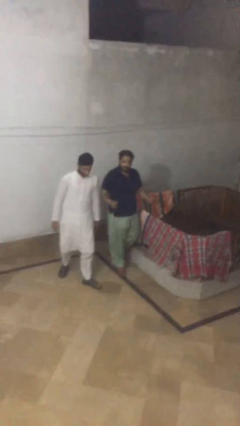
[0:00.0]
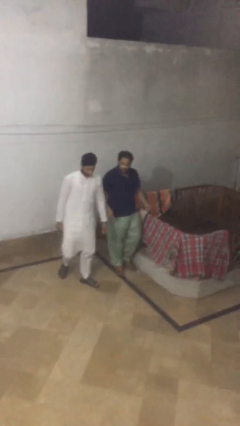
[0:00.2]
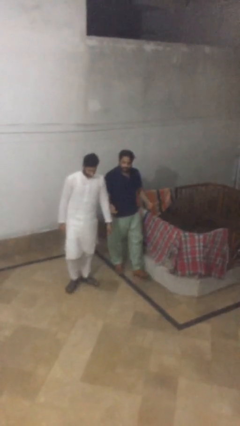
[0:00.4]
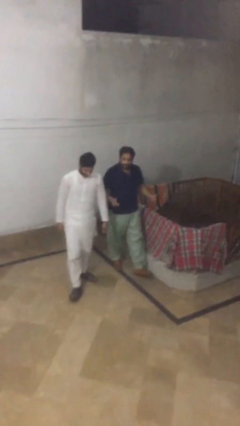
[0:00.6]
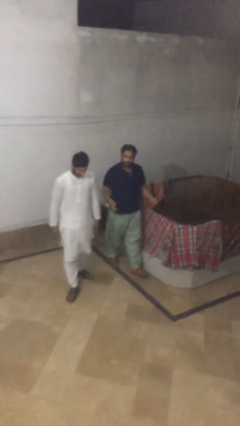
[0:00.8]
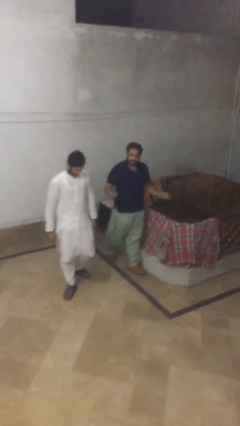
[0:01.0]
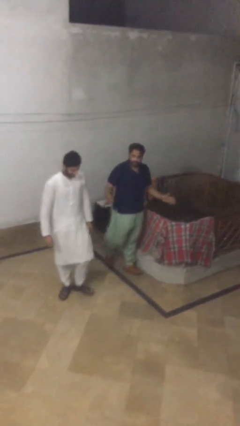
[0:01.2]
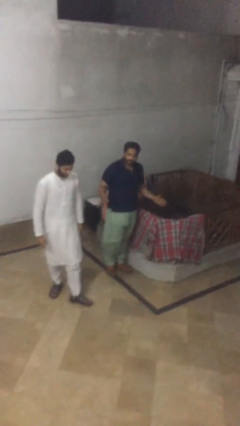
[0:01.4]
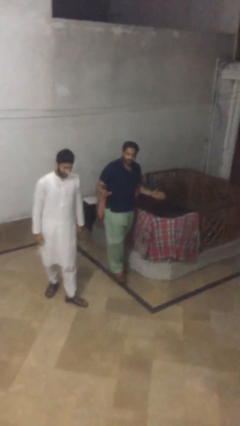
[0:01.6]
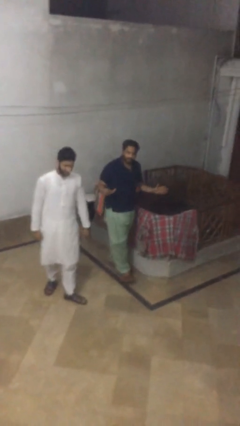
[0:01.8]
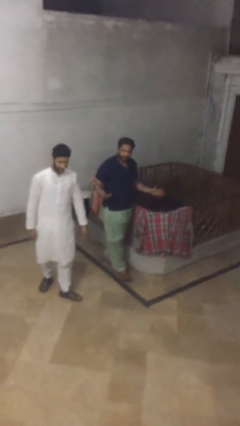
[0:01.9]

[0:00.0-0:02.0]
person talks to person

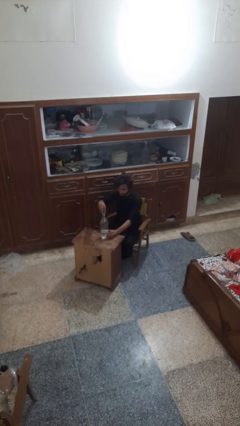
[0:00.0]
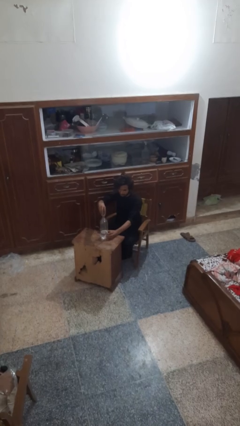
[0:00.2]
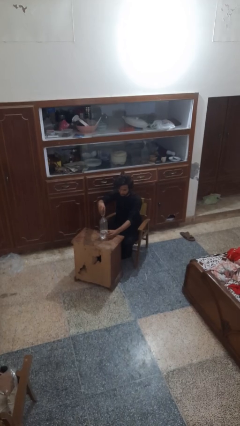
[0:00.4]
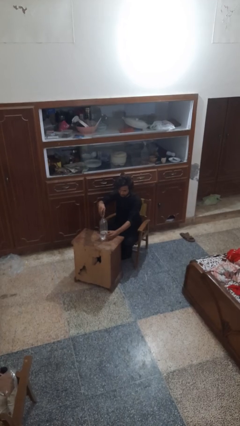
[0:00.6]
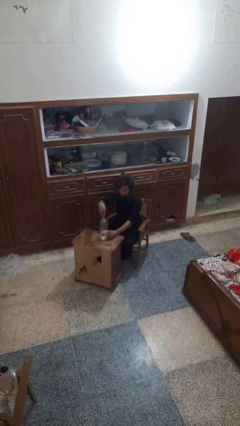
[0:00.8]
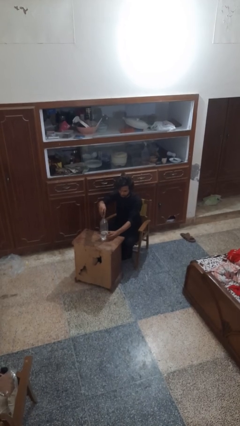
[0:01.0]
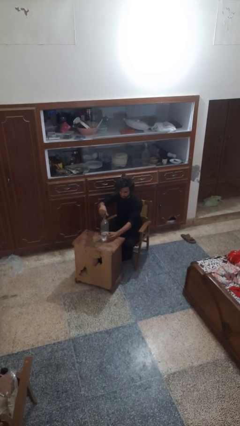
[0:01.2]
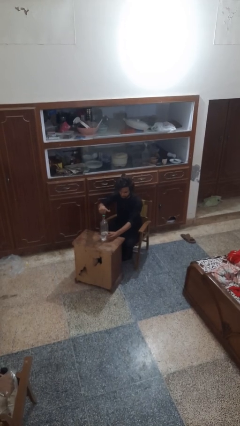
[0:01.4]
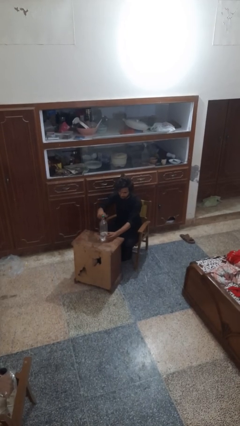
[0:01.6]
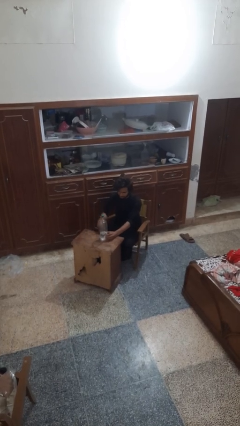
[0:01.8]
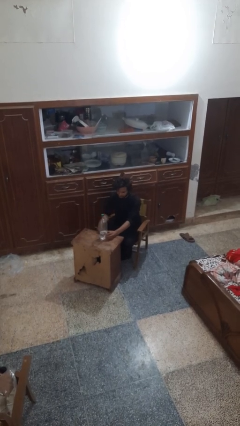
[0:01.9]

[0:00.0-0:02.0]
person screws lid to bottle

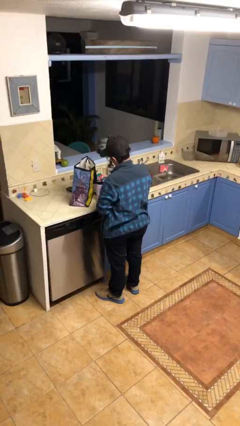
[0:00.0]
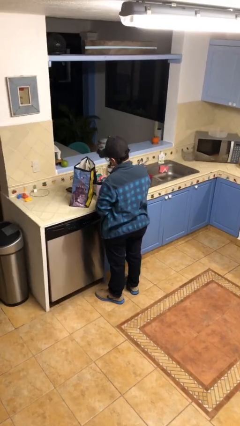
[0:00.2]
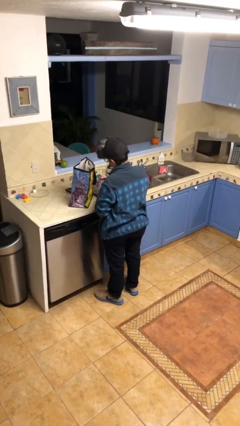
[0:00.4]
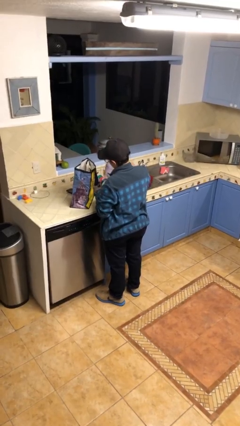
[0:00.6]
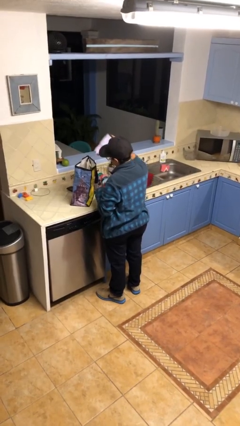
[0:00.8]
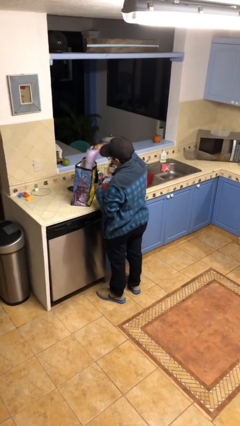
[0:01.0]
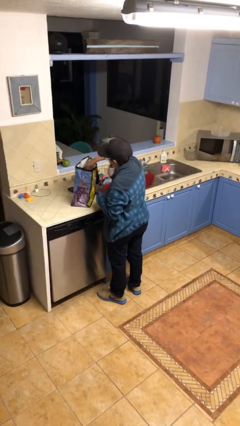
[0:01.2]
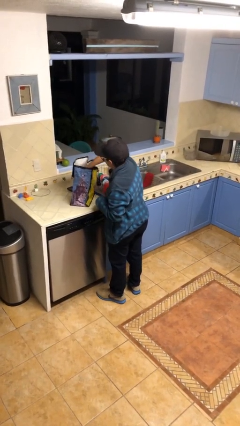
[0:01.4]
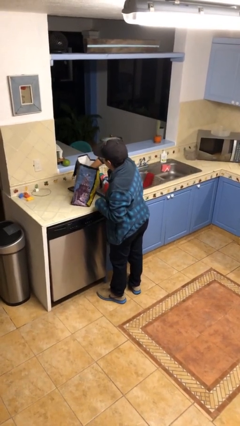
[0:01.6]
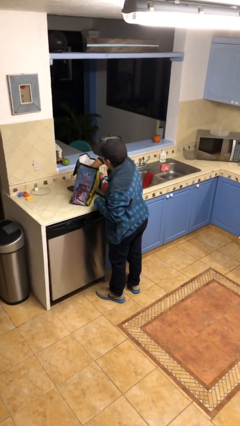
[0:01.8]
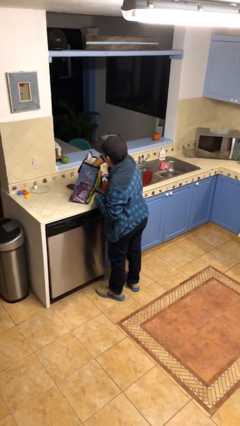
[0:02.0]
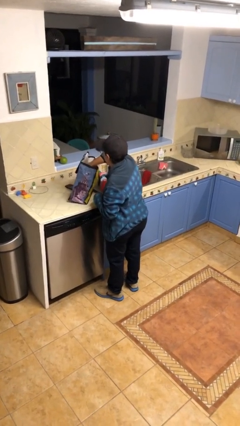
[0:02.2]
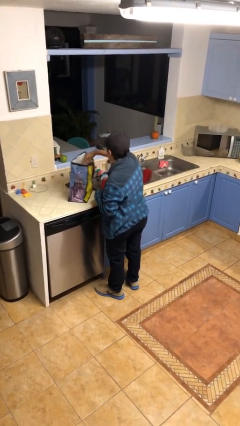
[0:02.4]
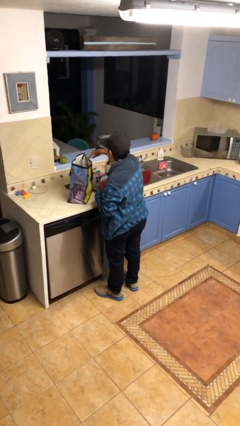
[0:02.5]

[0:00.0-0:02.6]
person puts object into bag

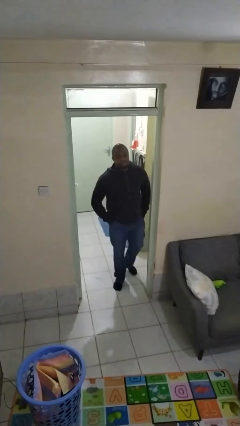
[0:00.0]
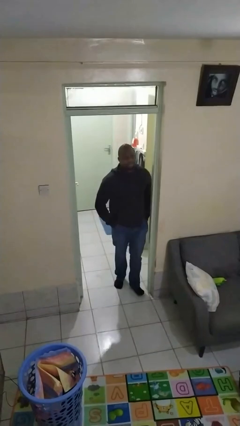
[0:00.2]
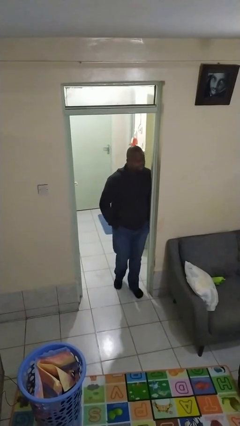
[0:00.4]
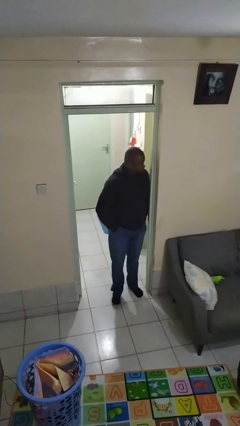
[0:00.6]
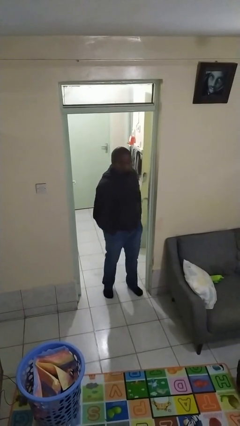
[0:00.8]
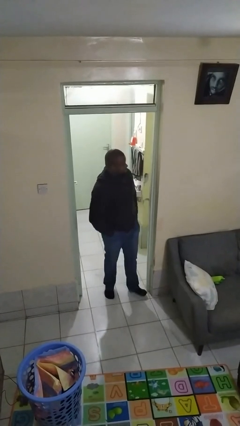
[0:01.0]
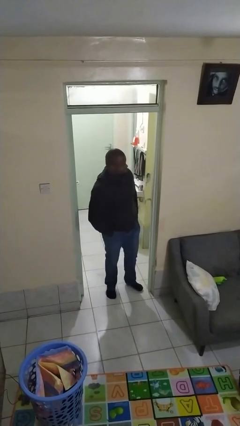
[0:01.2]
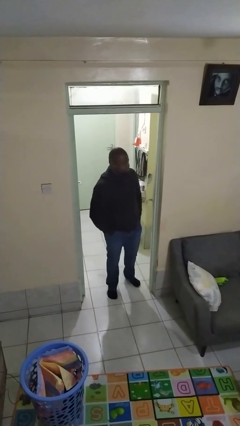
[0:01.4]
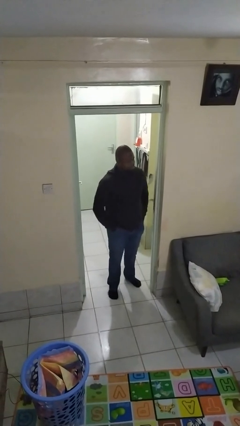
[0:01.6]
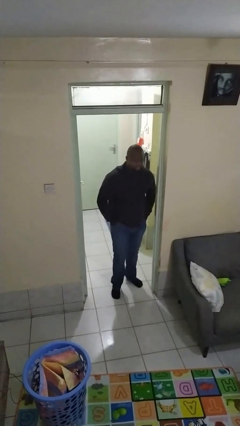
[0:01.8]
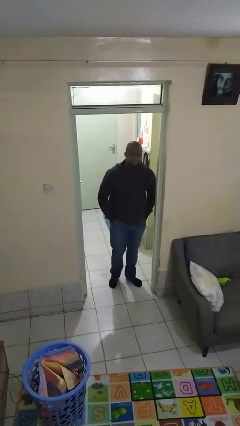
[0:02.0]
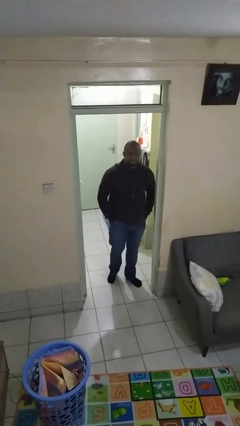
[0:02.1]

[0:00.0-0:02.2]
person bumps into wall

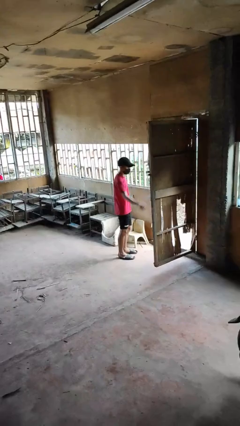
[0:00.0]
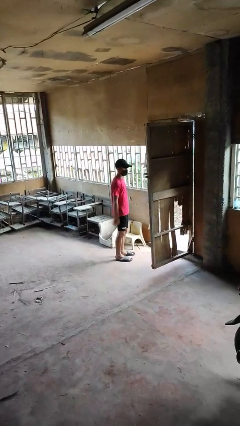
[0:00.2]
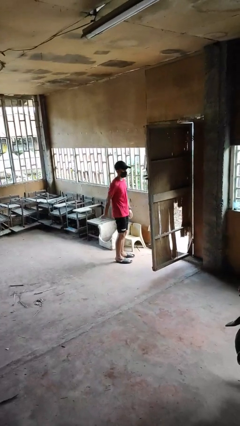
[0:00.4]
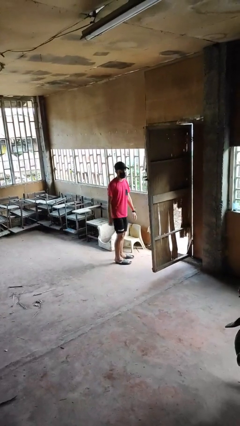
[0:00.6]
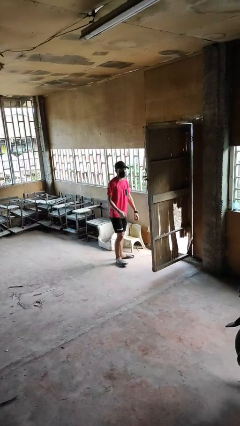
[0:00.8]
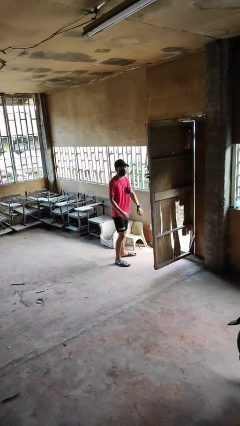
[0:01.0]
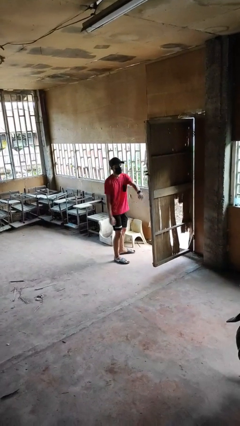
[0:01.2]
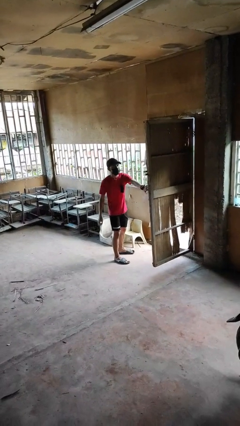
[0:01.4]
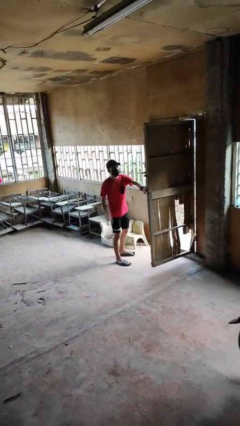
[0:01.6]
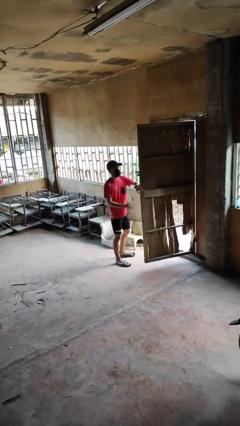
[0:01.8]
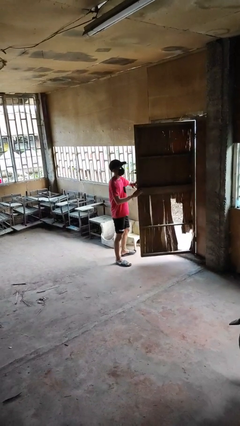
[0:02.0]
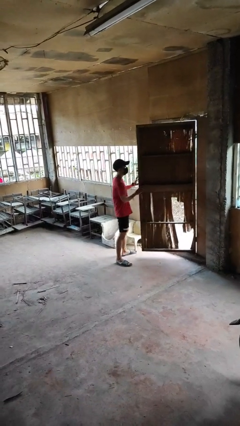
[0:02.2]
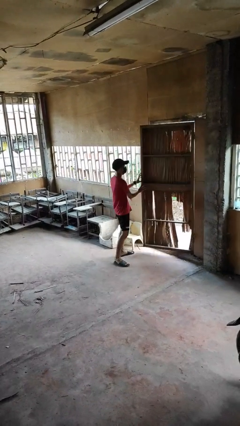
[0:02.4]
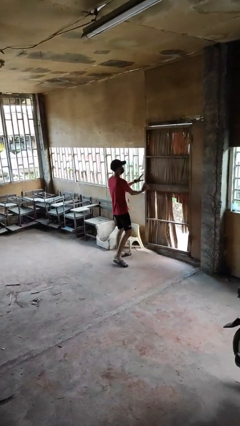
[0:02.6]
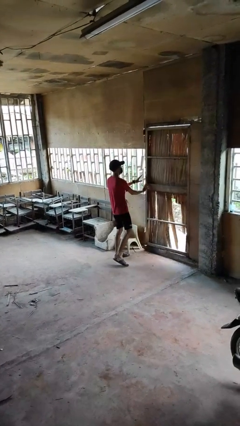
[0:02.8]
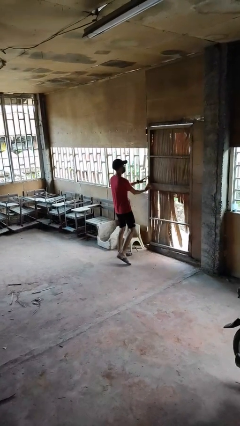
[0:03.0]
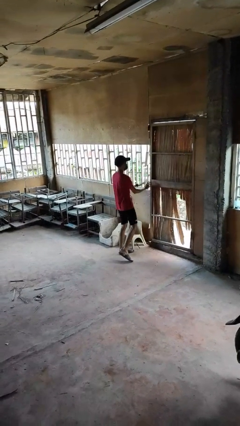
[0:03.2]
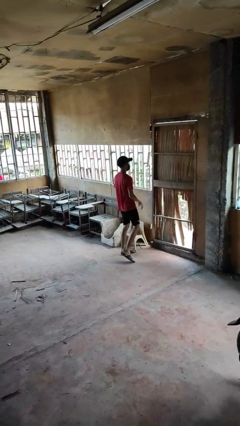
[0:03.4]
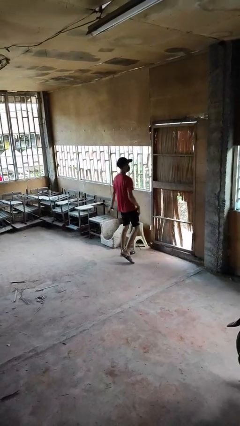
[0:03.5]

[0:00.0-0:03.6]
person closes facility door

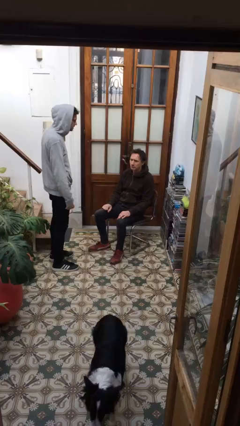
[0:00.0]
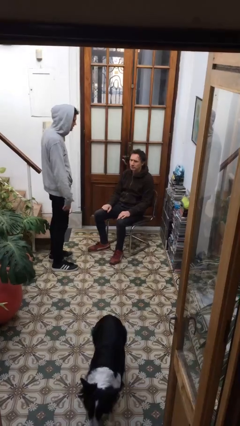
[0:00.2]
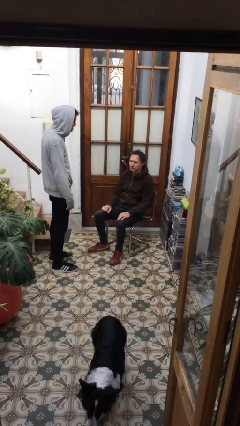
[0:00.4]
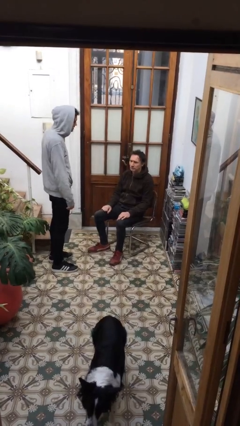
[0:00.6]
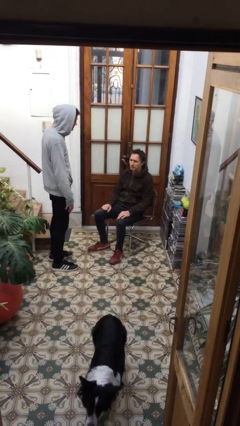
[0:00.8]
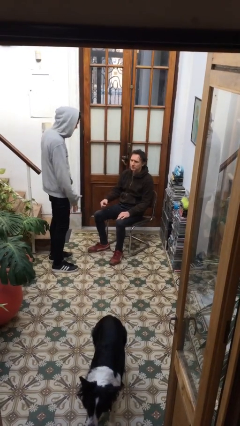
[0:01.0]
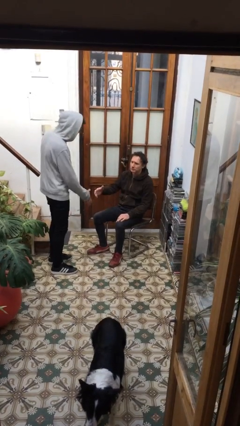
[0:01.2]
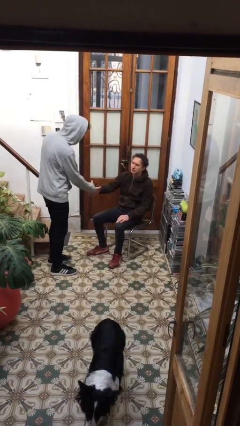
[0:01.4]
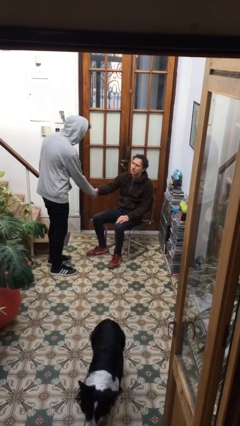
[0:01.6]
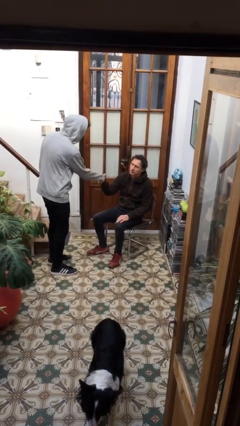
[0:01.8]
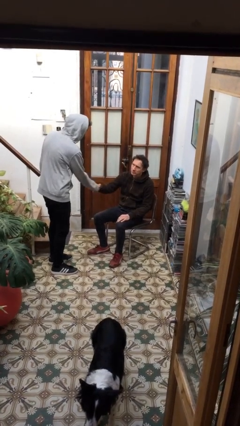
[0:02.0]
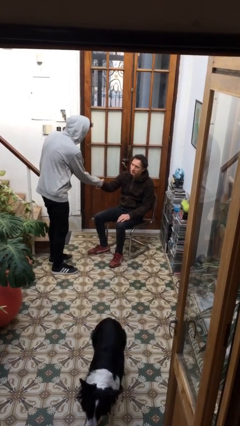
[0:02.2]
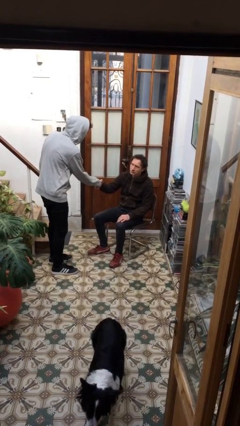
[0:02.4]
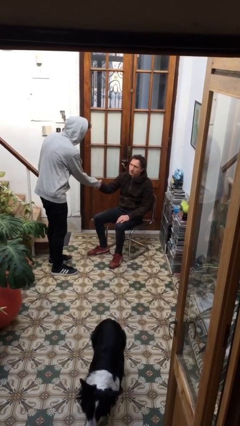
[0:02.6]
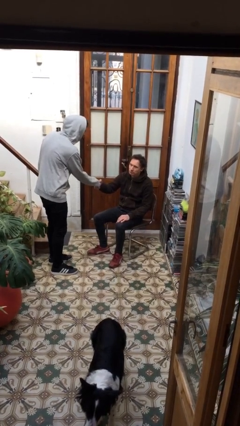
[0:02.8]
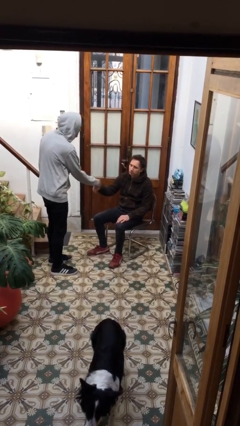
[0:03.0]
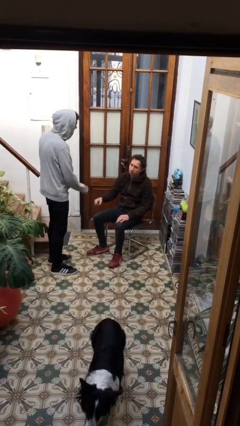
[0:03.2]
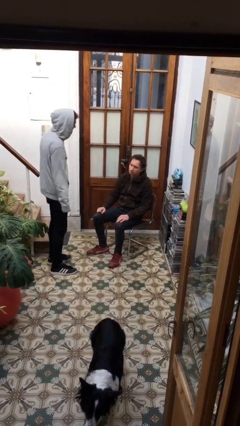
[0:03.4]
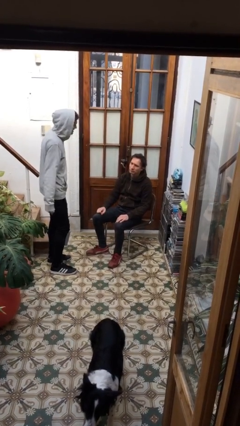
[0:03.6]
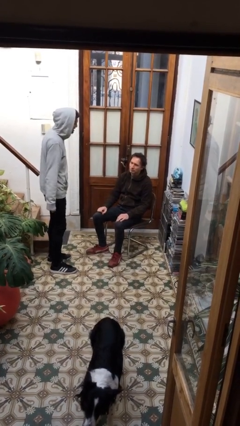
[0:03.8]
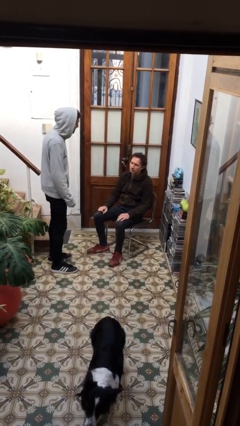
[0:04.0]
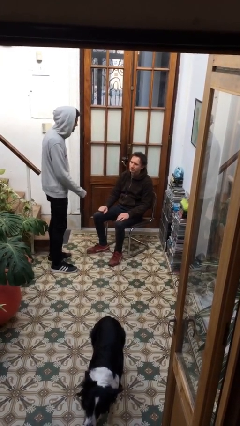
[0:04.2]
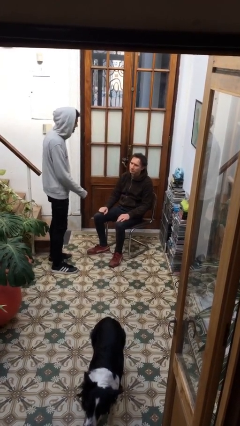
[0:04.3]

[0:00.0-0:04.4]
person shakes hand

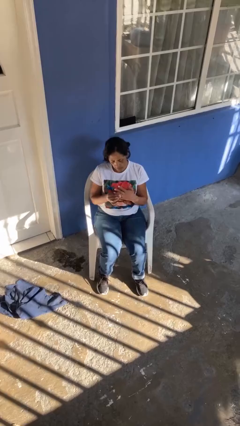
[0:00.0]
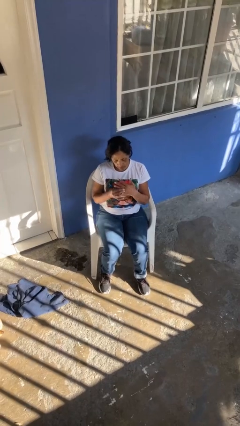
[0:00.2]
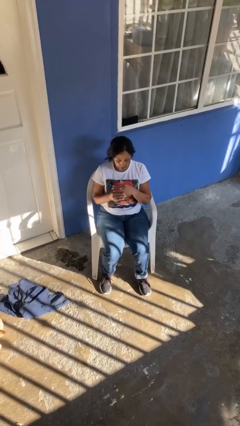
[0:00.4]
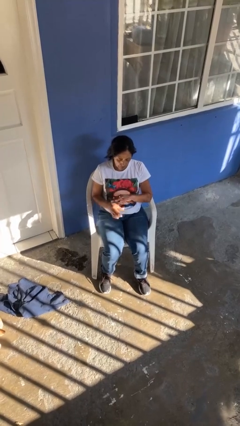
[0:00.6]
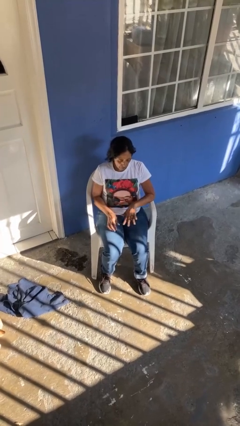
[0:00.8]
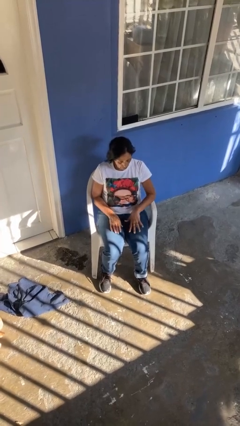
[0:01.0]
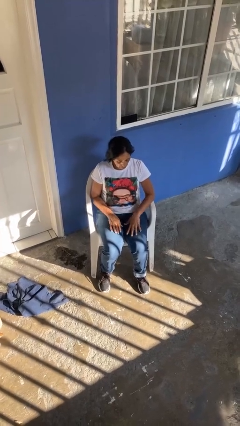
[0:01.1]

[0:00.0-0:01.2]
person puts on ring
